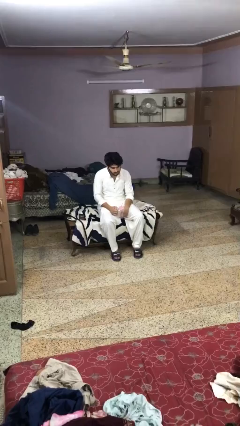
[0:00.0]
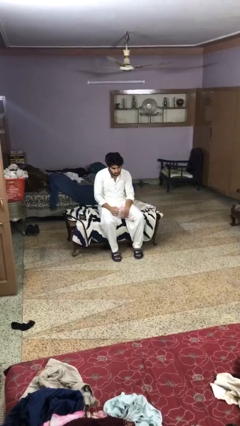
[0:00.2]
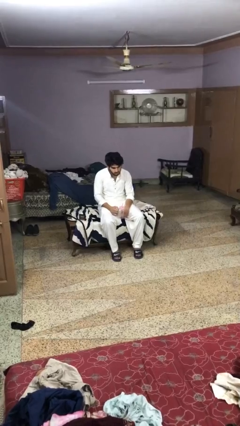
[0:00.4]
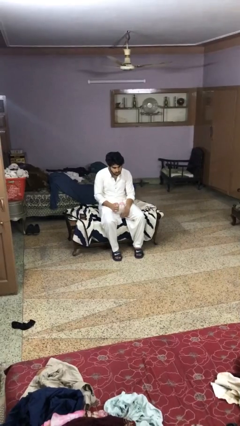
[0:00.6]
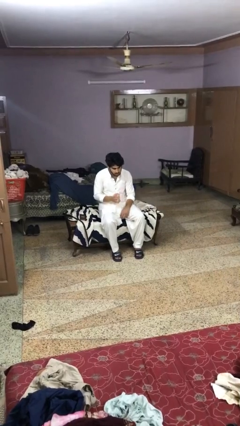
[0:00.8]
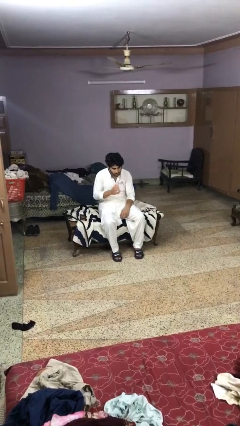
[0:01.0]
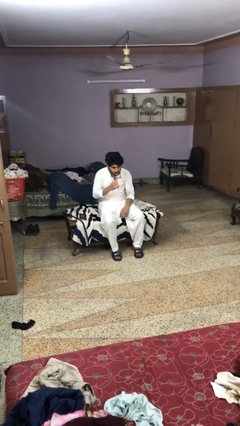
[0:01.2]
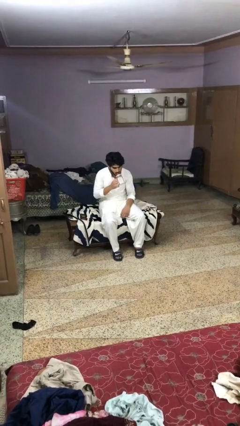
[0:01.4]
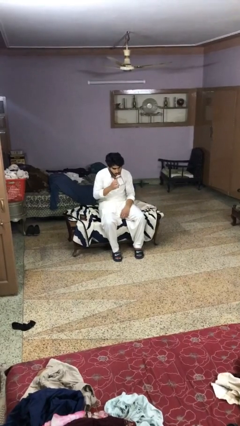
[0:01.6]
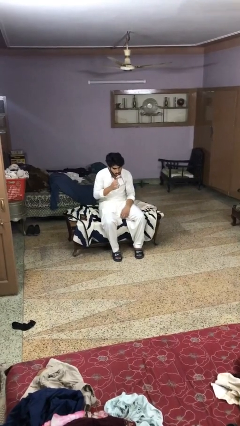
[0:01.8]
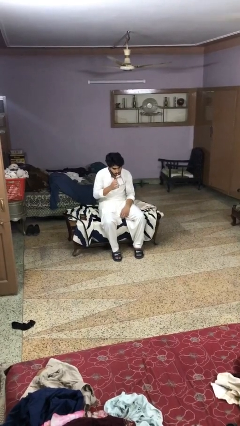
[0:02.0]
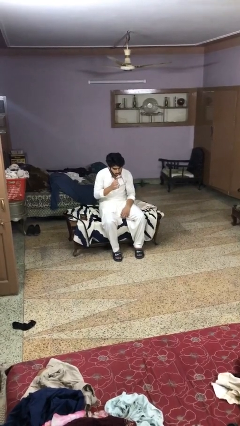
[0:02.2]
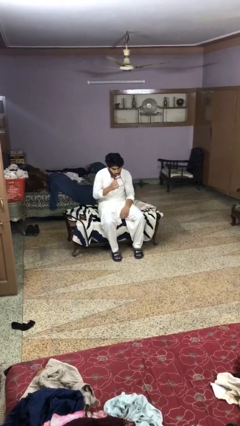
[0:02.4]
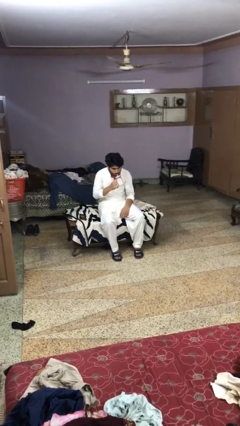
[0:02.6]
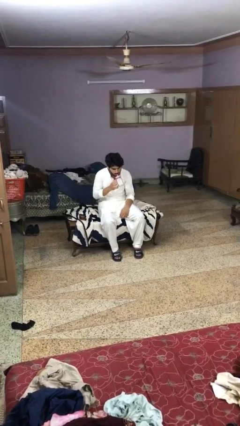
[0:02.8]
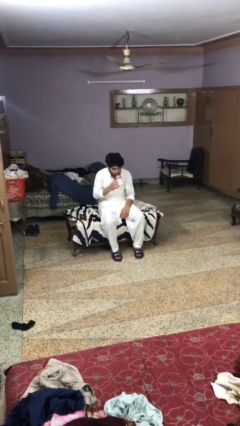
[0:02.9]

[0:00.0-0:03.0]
person drinks from straw

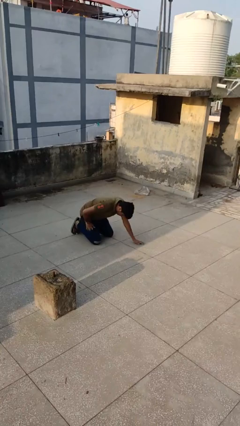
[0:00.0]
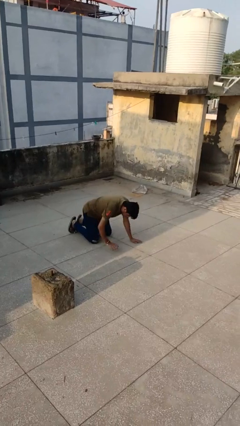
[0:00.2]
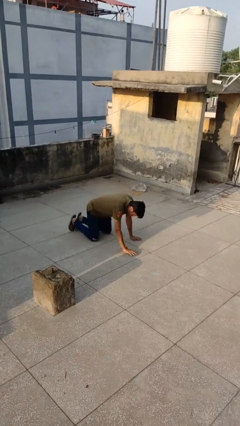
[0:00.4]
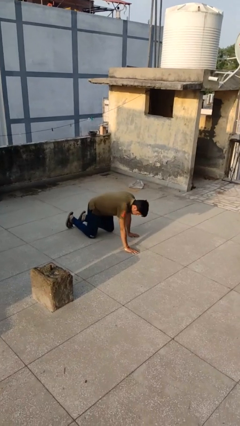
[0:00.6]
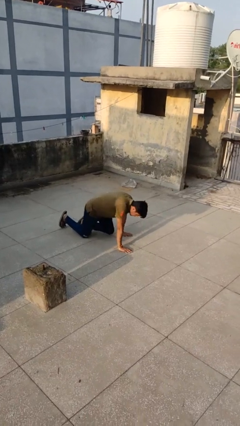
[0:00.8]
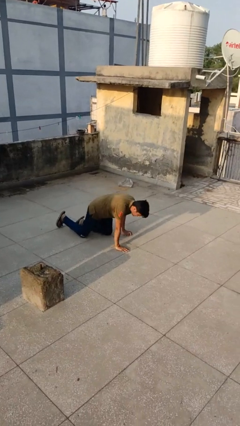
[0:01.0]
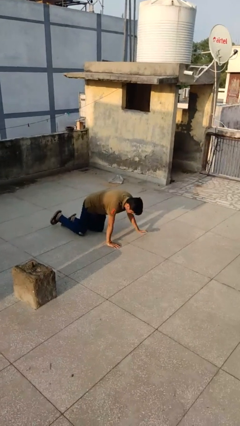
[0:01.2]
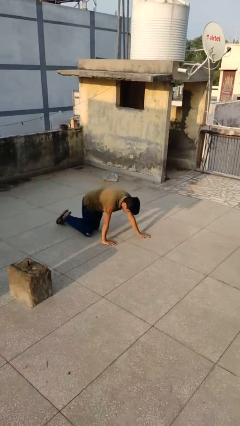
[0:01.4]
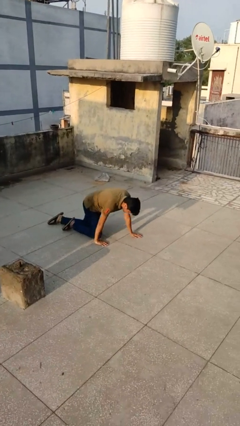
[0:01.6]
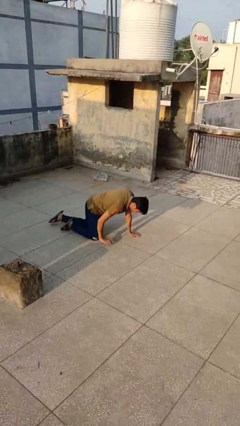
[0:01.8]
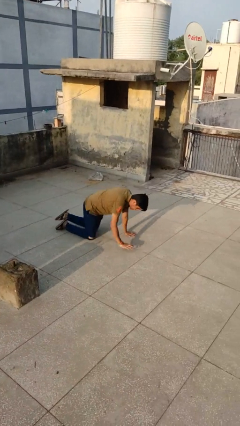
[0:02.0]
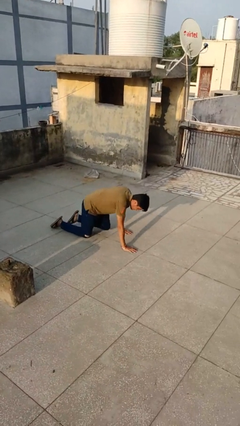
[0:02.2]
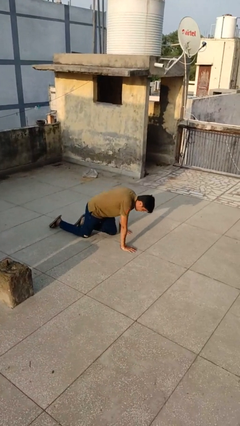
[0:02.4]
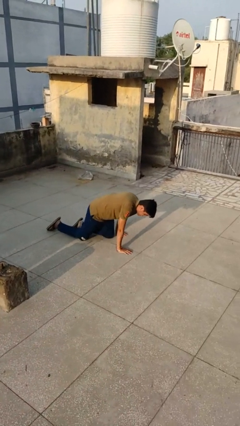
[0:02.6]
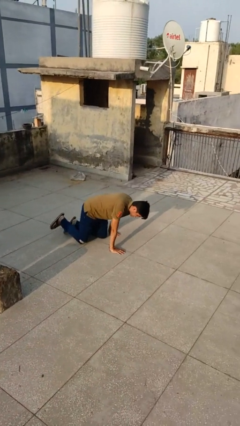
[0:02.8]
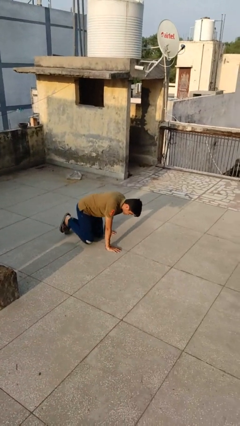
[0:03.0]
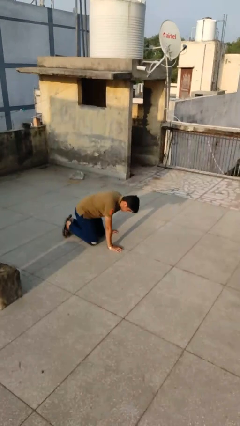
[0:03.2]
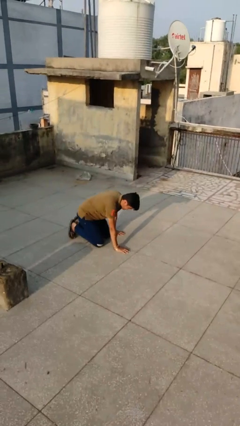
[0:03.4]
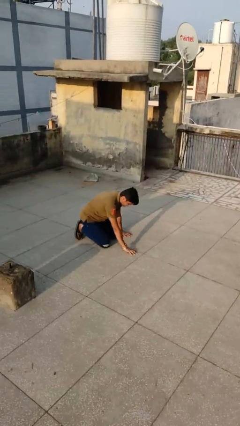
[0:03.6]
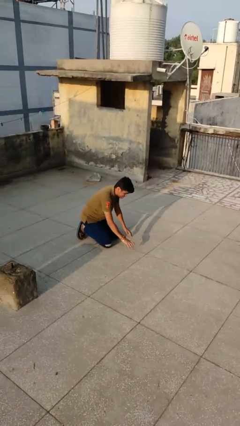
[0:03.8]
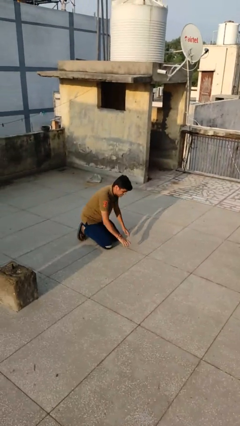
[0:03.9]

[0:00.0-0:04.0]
person crawls

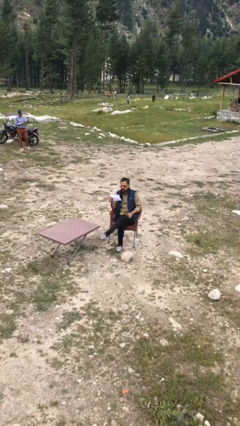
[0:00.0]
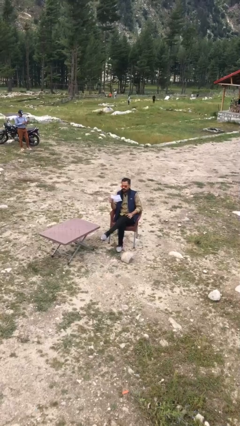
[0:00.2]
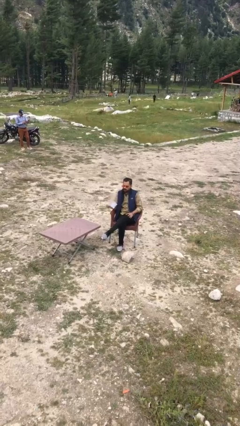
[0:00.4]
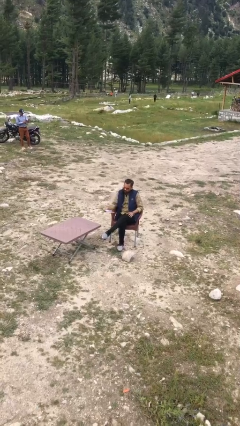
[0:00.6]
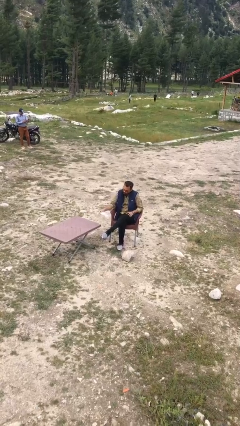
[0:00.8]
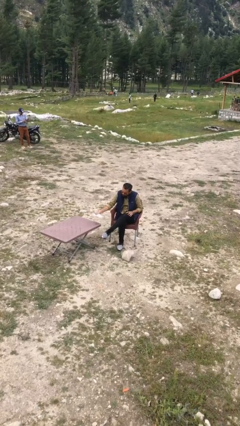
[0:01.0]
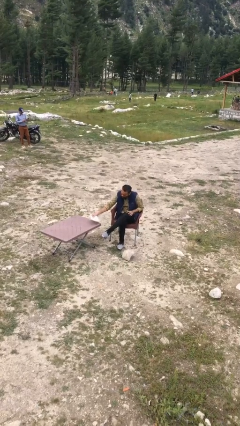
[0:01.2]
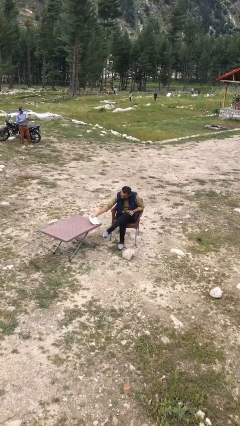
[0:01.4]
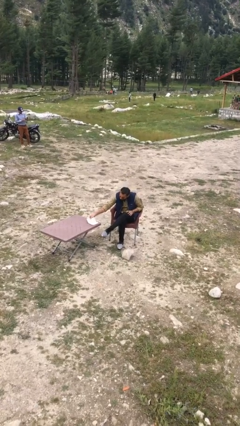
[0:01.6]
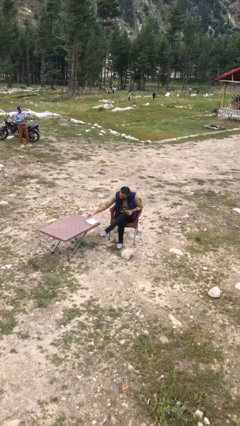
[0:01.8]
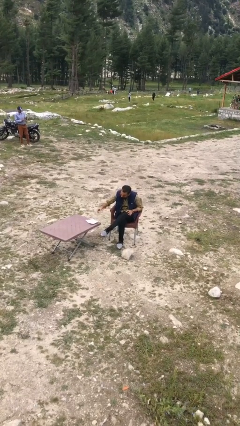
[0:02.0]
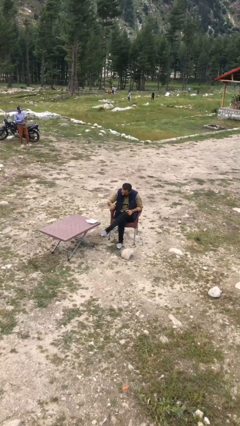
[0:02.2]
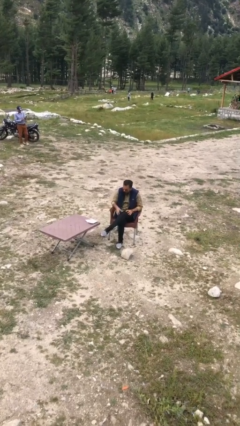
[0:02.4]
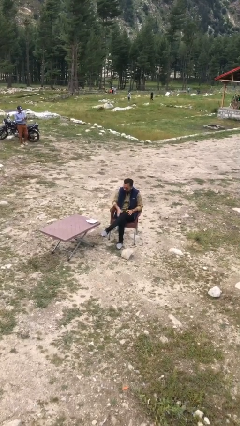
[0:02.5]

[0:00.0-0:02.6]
person puts down object on table

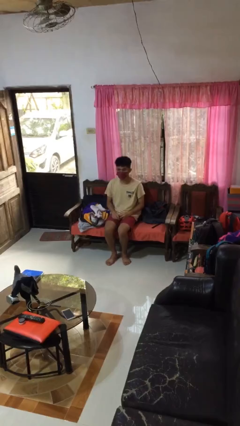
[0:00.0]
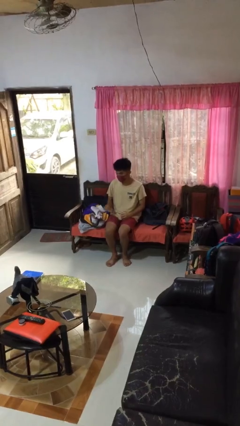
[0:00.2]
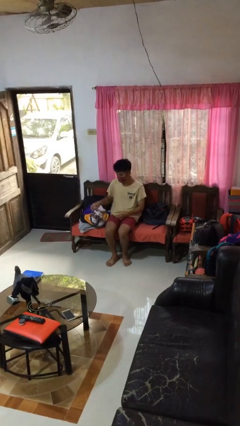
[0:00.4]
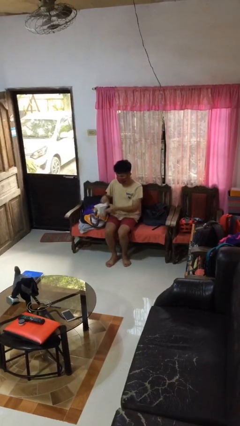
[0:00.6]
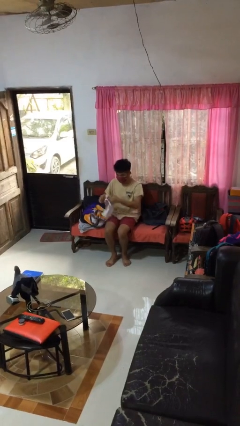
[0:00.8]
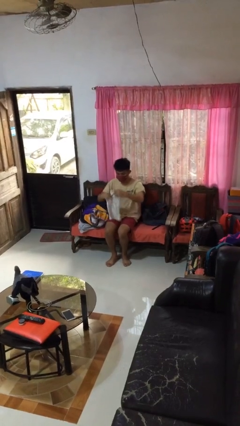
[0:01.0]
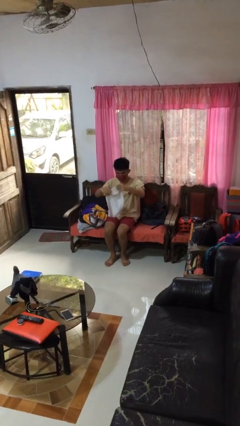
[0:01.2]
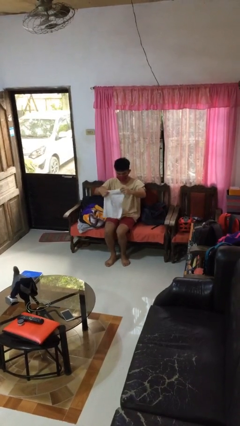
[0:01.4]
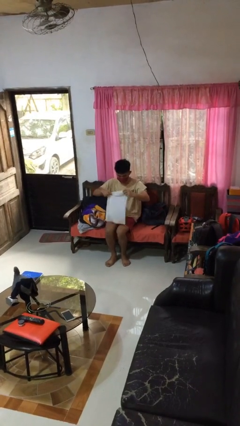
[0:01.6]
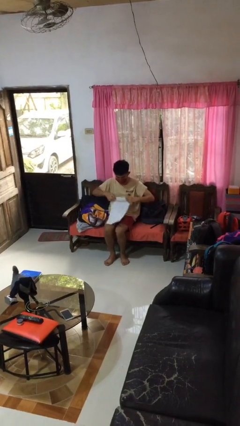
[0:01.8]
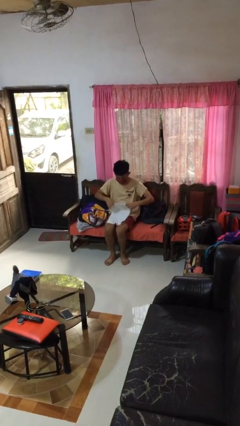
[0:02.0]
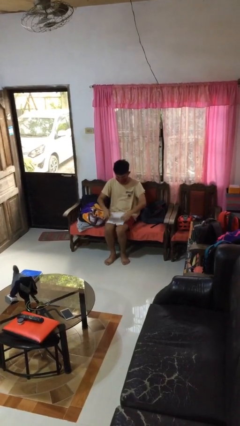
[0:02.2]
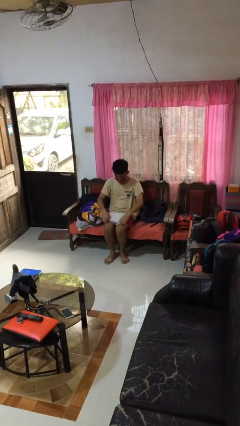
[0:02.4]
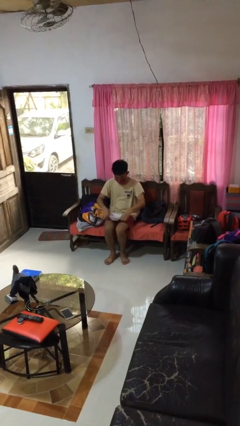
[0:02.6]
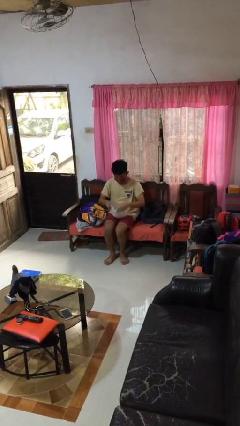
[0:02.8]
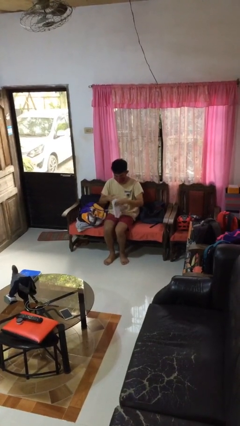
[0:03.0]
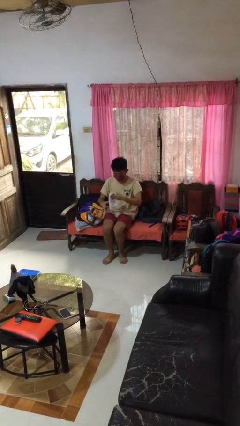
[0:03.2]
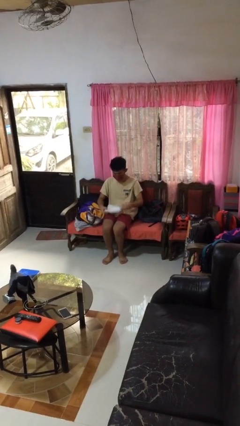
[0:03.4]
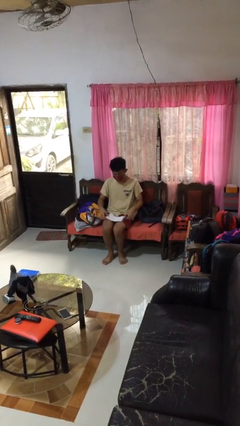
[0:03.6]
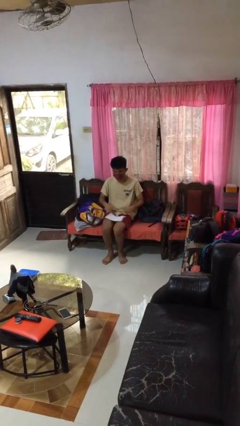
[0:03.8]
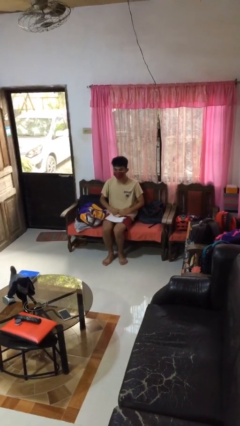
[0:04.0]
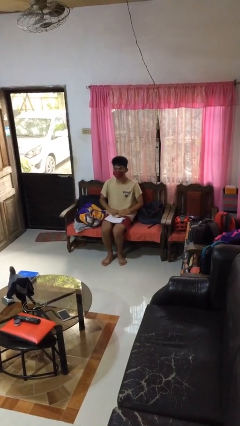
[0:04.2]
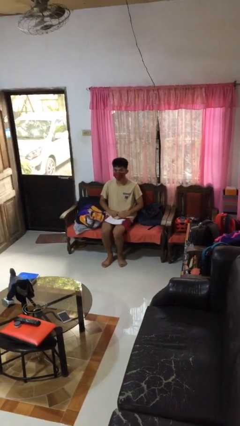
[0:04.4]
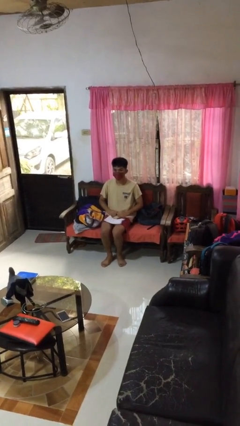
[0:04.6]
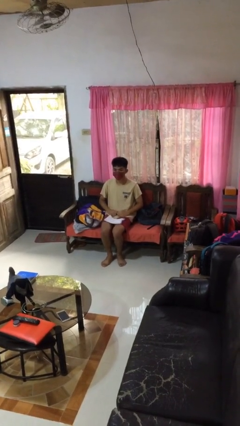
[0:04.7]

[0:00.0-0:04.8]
person folds towel

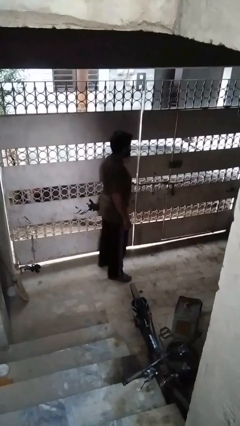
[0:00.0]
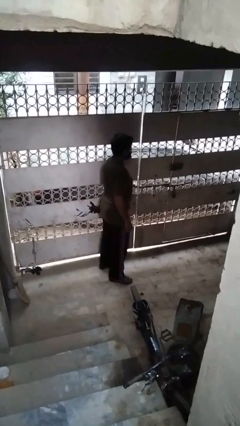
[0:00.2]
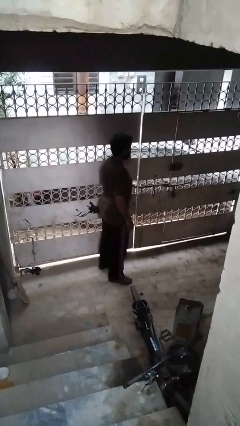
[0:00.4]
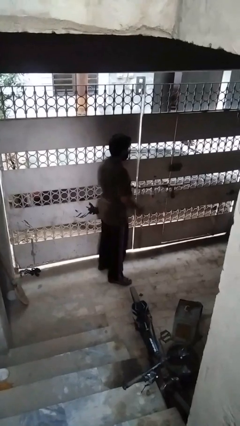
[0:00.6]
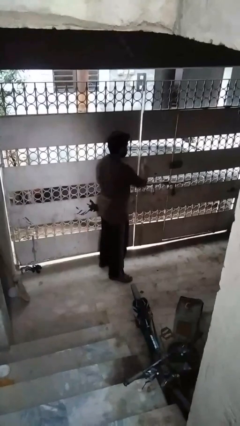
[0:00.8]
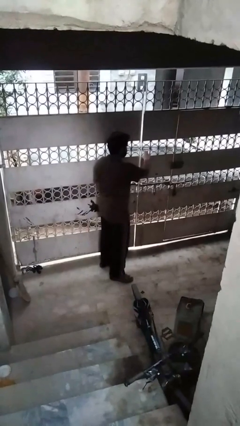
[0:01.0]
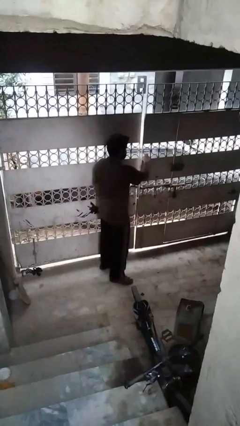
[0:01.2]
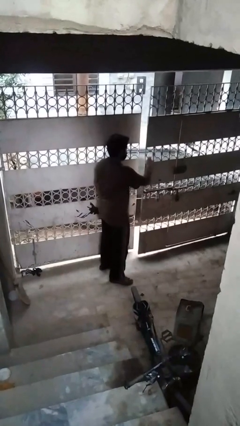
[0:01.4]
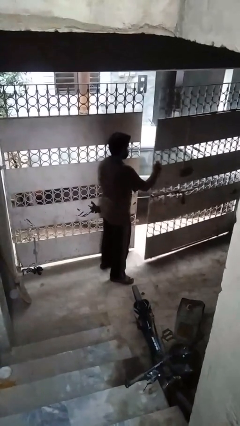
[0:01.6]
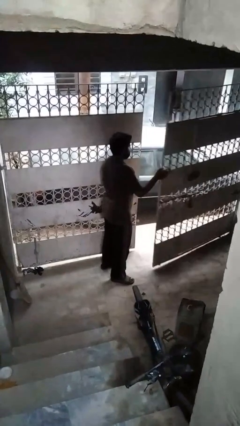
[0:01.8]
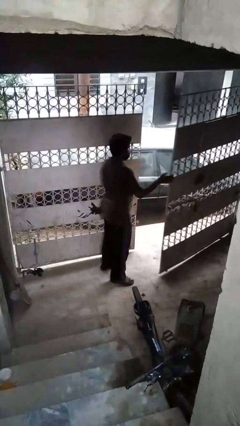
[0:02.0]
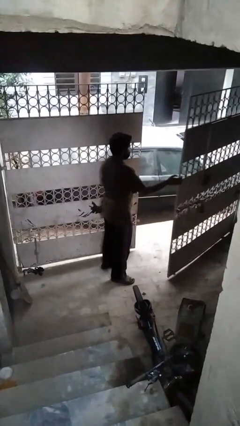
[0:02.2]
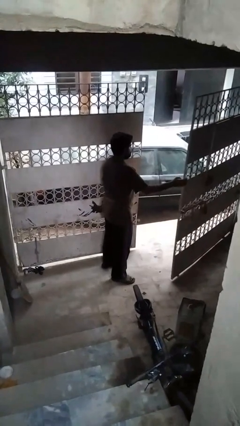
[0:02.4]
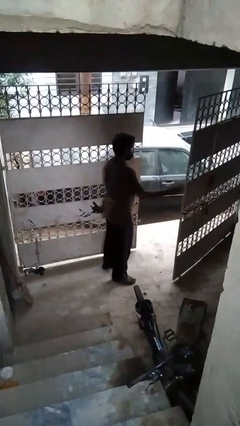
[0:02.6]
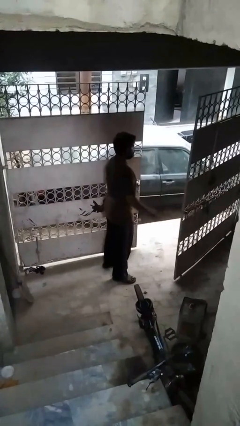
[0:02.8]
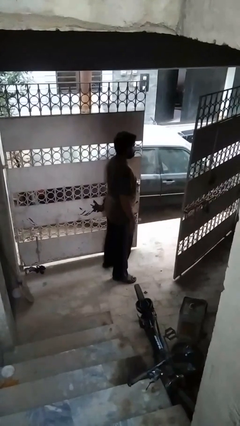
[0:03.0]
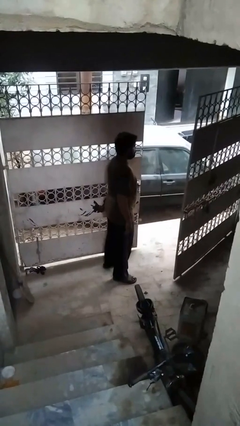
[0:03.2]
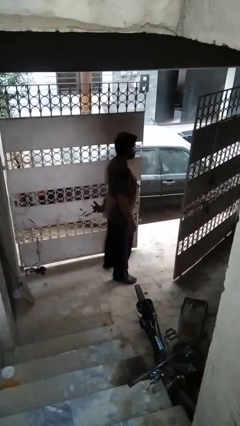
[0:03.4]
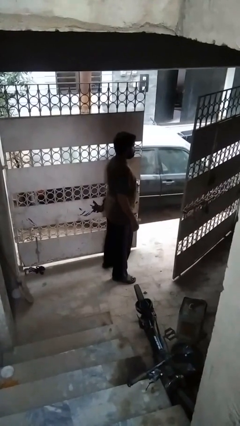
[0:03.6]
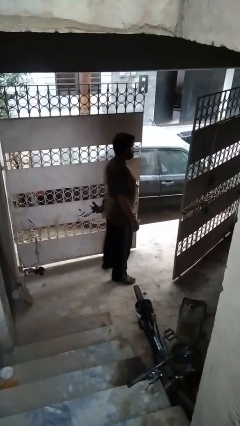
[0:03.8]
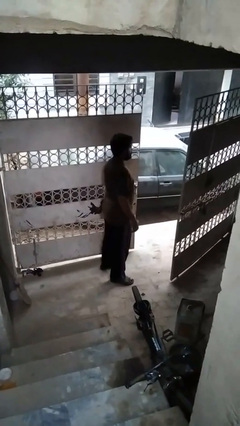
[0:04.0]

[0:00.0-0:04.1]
person opens gate
